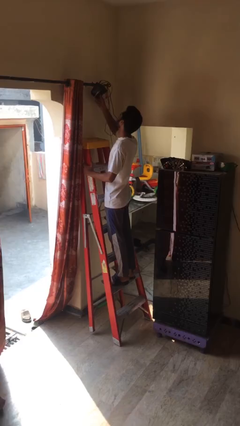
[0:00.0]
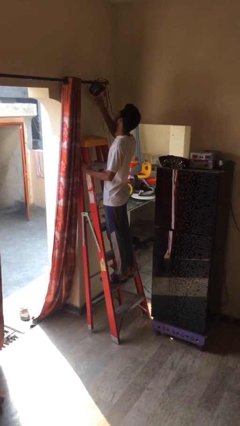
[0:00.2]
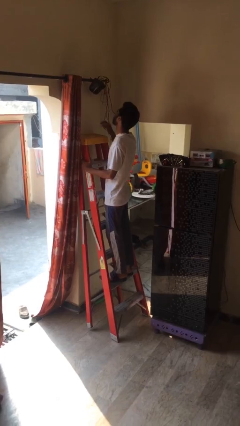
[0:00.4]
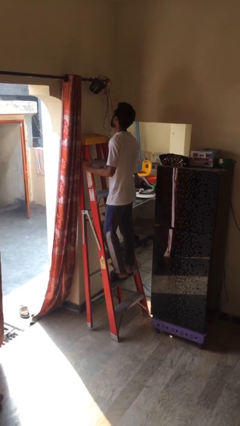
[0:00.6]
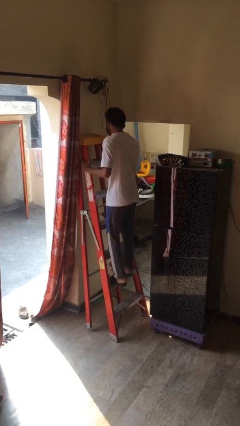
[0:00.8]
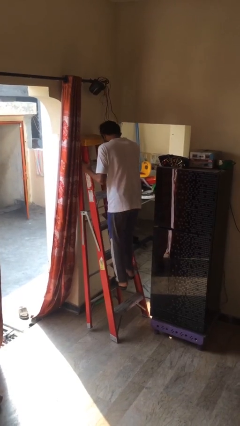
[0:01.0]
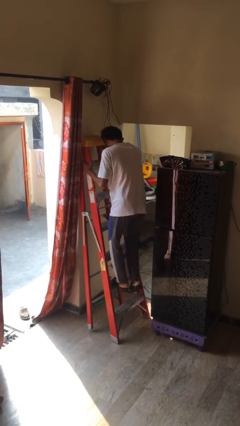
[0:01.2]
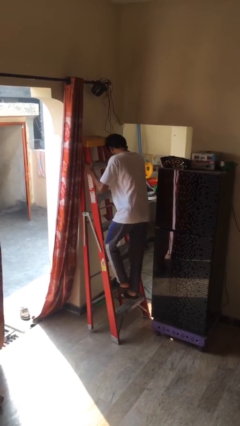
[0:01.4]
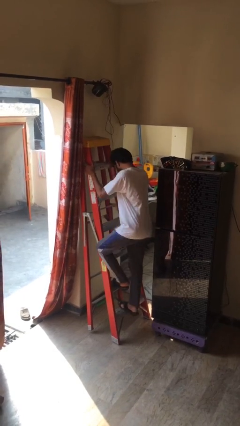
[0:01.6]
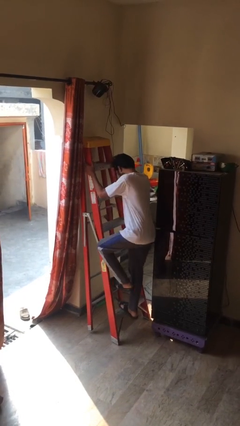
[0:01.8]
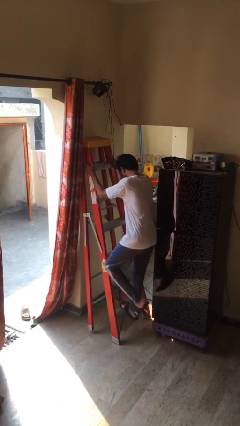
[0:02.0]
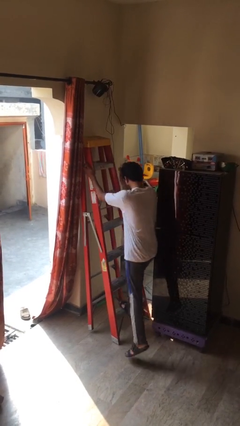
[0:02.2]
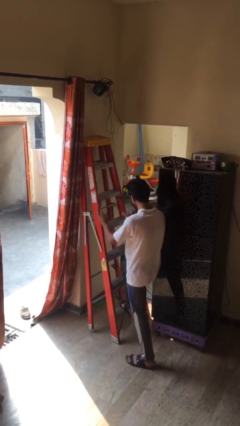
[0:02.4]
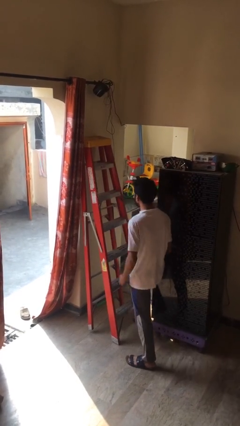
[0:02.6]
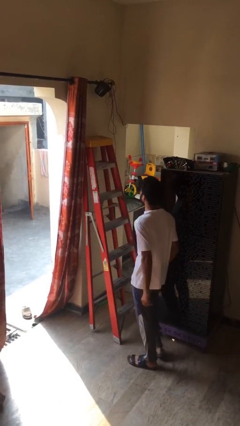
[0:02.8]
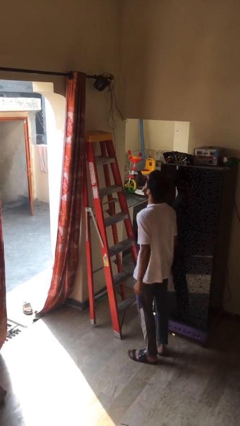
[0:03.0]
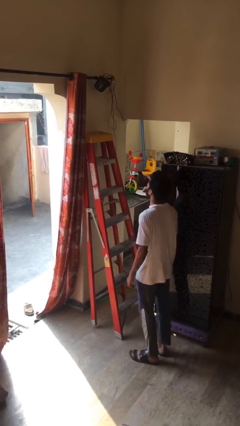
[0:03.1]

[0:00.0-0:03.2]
person climbs down ladder

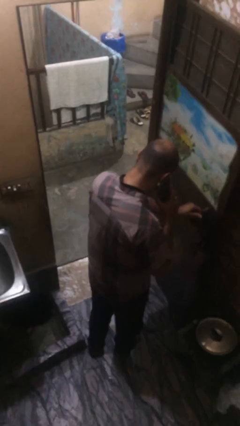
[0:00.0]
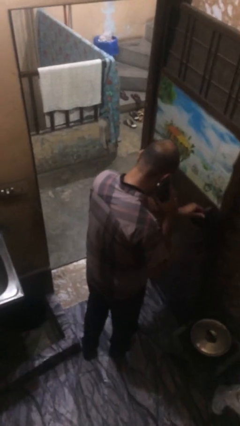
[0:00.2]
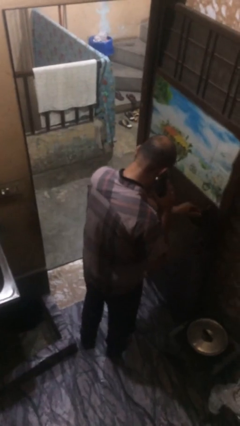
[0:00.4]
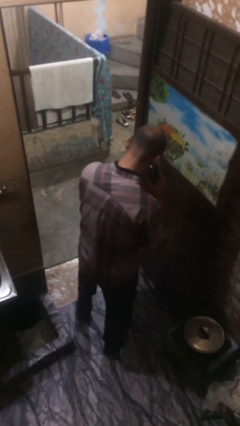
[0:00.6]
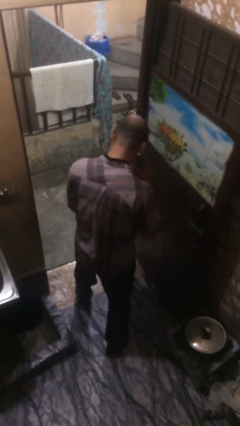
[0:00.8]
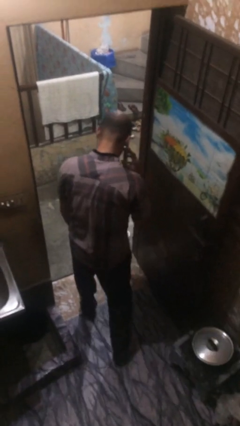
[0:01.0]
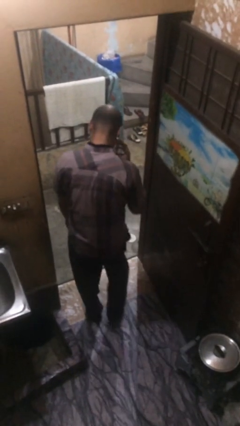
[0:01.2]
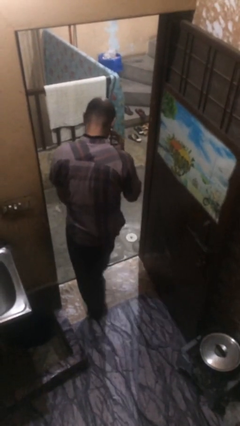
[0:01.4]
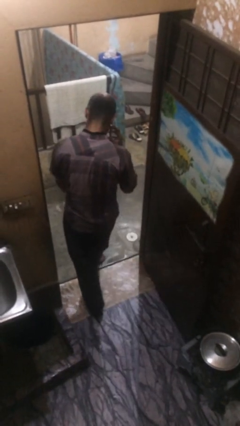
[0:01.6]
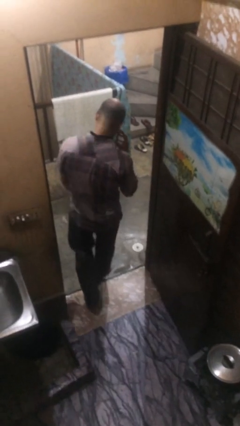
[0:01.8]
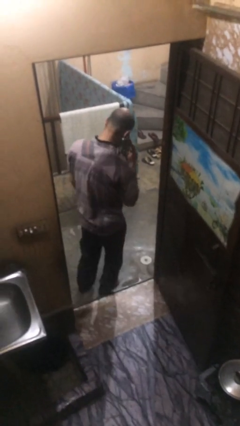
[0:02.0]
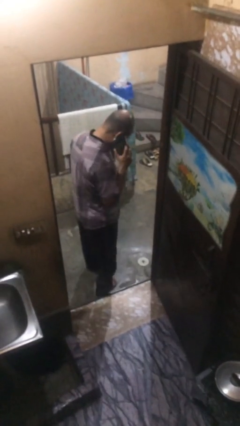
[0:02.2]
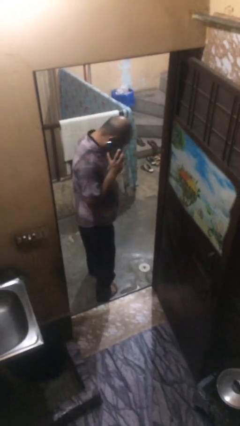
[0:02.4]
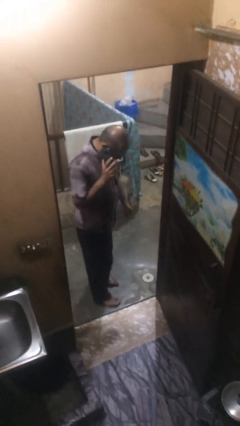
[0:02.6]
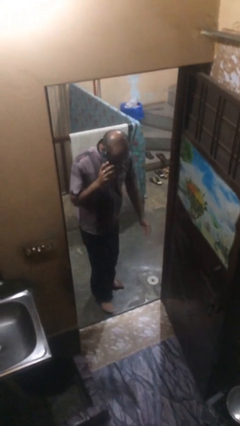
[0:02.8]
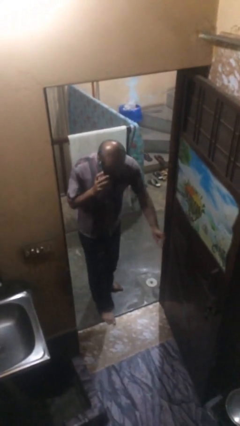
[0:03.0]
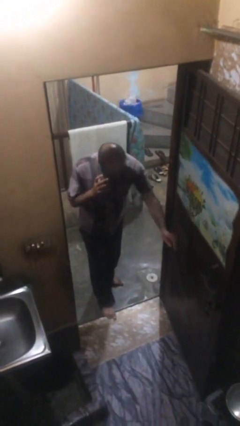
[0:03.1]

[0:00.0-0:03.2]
person exits scene through structure

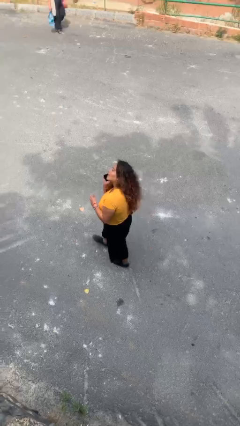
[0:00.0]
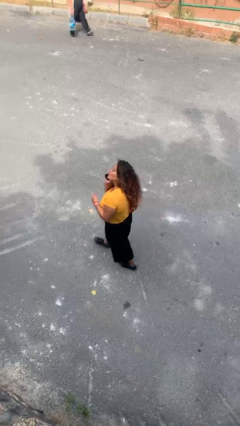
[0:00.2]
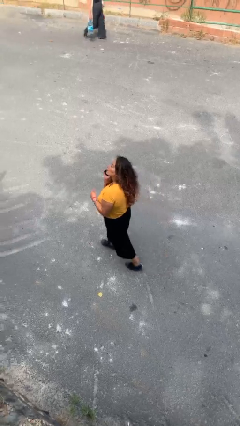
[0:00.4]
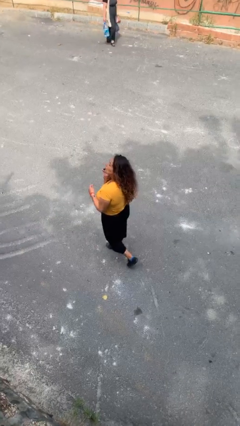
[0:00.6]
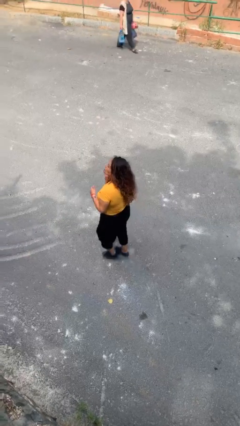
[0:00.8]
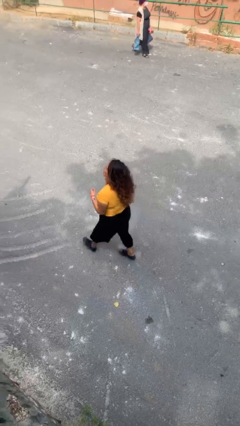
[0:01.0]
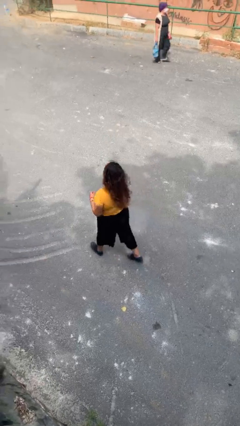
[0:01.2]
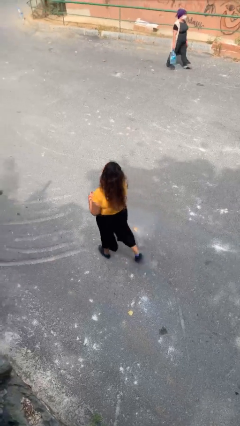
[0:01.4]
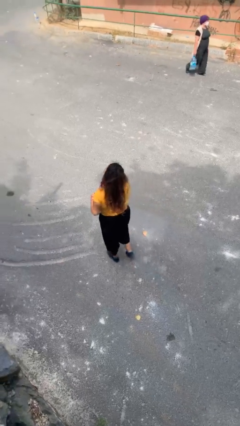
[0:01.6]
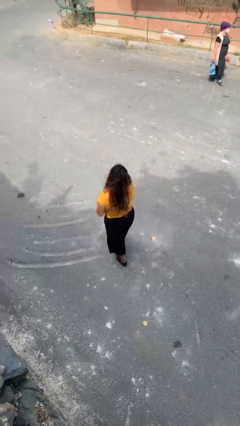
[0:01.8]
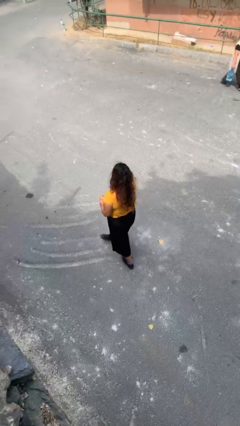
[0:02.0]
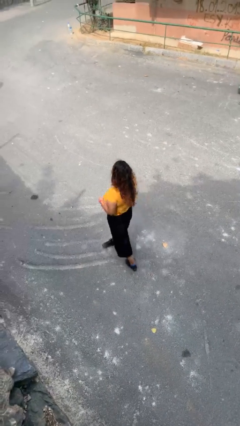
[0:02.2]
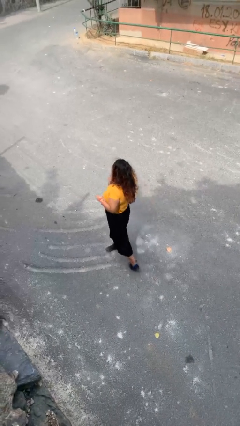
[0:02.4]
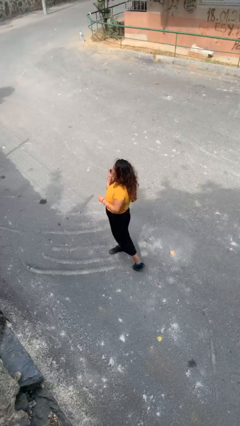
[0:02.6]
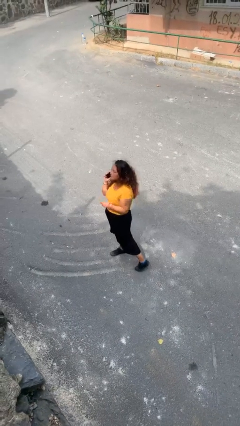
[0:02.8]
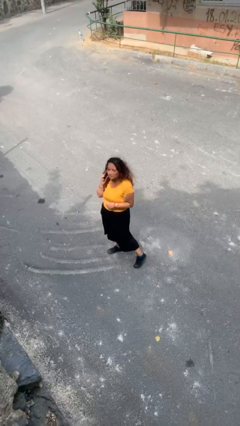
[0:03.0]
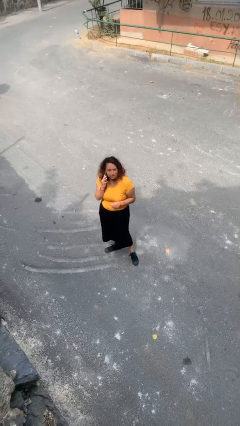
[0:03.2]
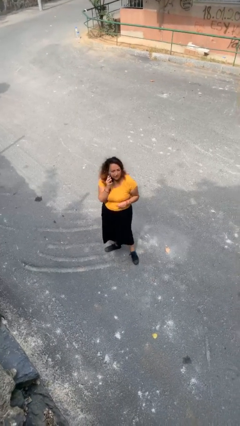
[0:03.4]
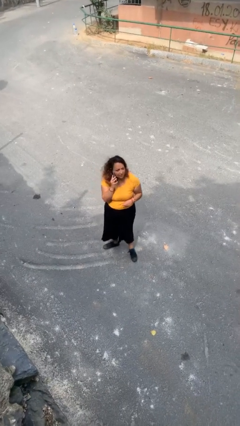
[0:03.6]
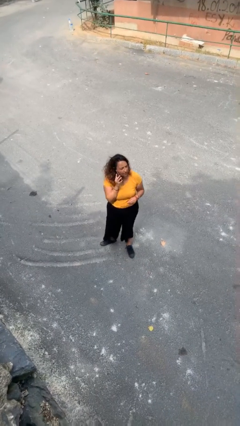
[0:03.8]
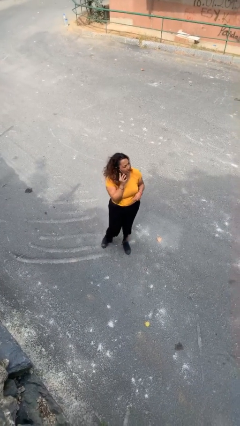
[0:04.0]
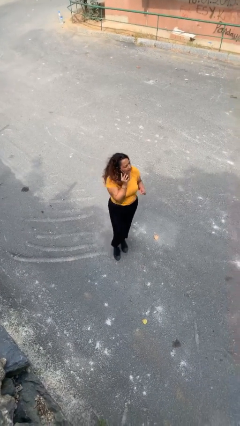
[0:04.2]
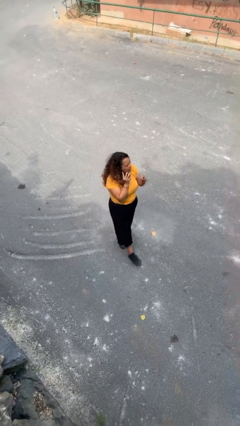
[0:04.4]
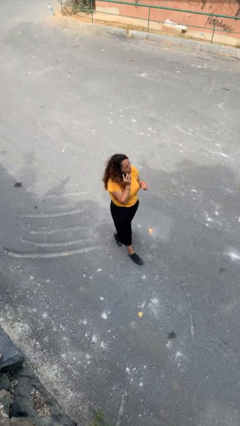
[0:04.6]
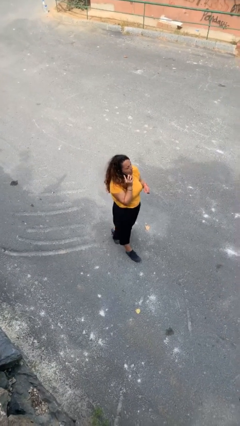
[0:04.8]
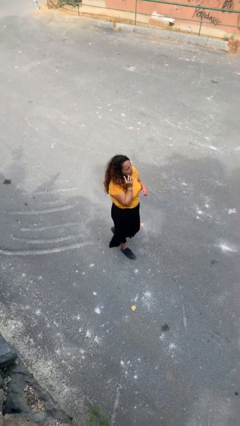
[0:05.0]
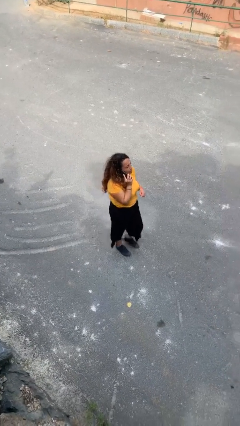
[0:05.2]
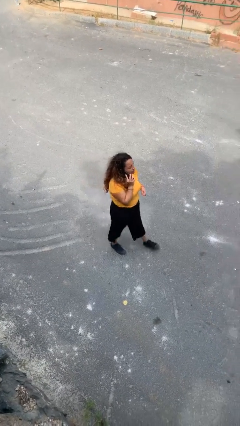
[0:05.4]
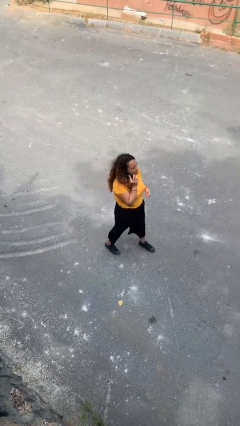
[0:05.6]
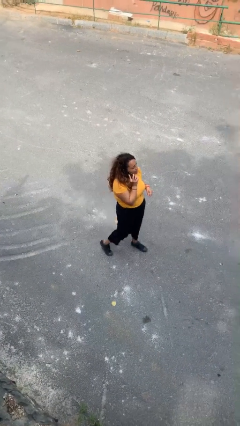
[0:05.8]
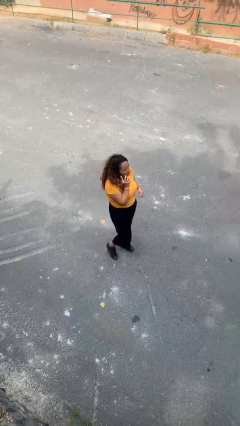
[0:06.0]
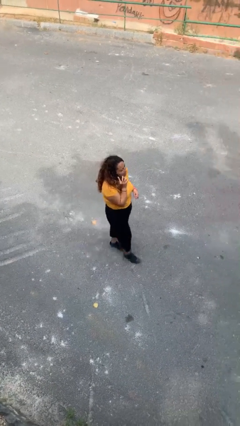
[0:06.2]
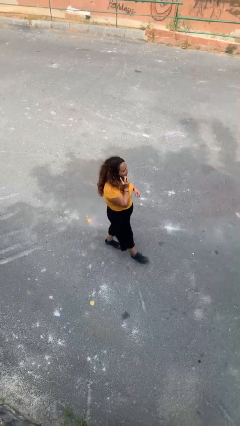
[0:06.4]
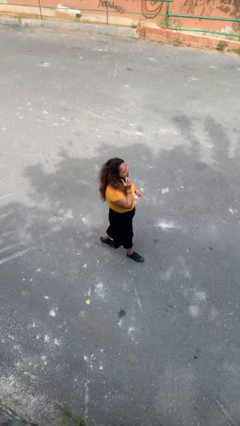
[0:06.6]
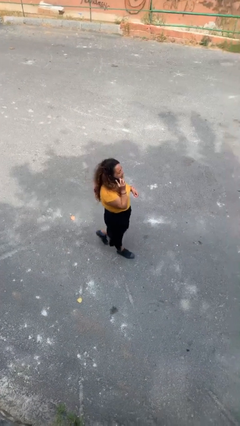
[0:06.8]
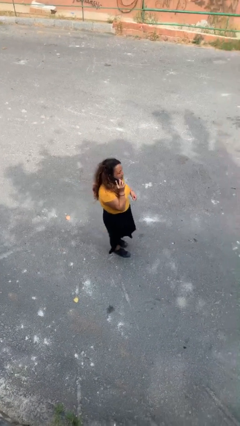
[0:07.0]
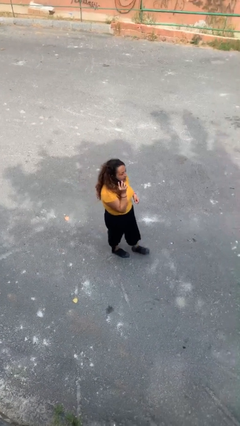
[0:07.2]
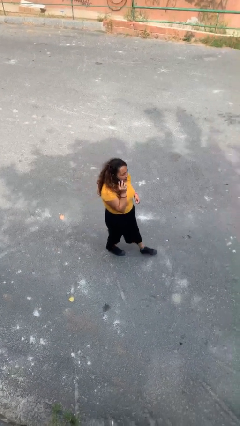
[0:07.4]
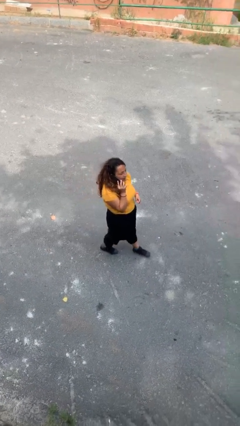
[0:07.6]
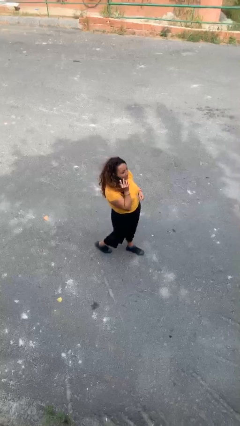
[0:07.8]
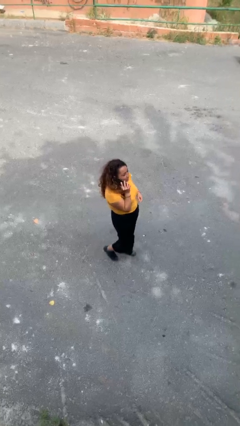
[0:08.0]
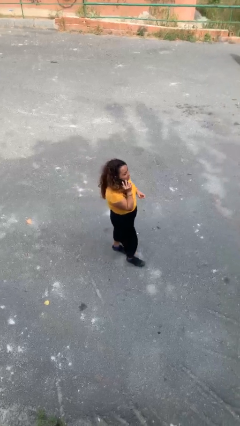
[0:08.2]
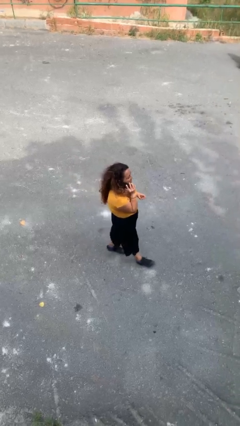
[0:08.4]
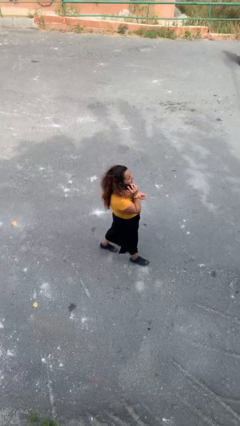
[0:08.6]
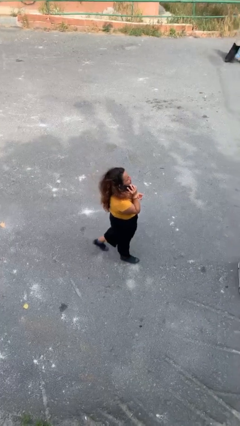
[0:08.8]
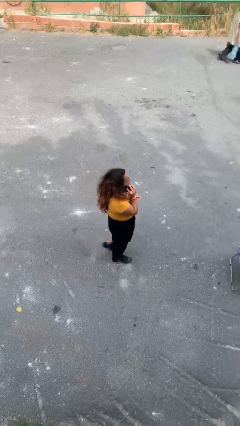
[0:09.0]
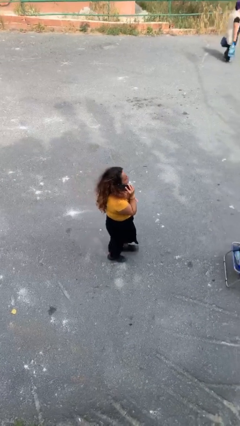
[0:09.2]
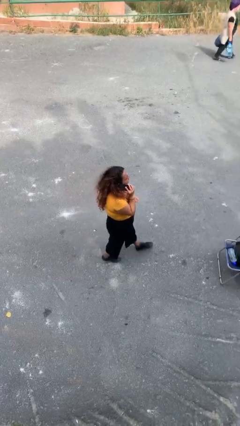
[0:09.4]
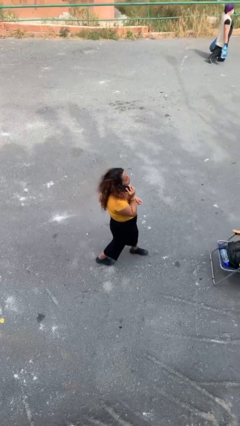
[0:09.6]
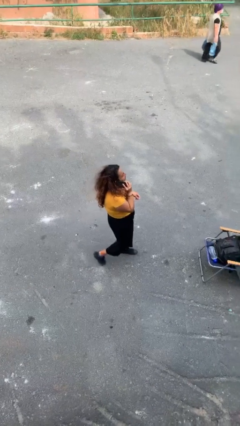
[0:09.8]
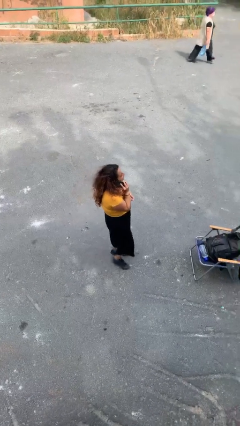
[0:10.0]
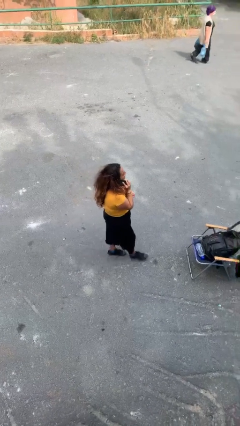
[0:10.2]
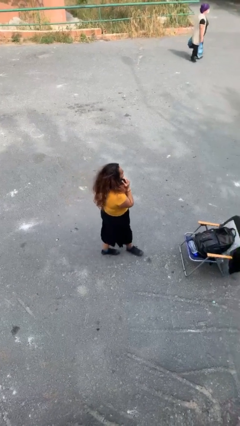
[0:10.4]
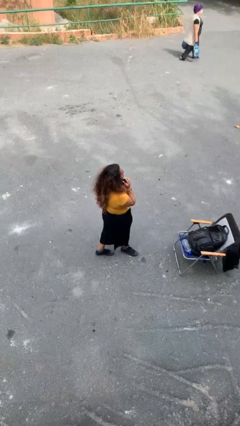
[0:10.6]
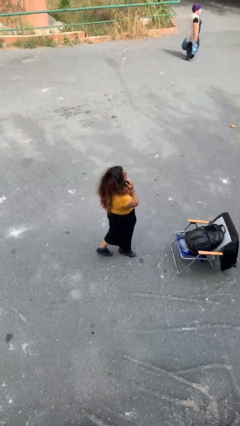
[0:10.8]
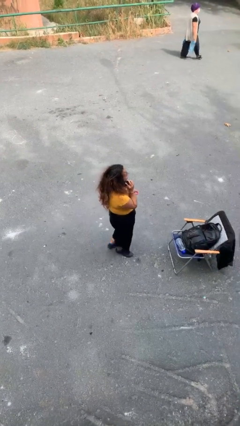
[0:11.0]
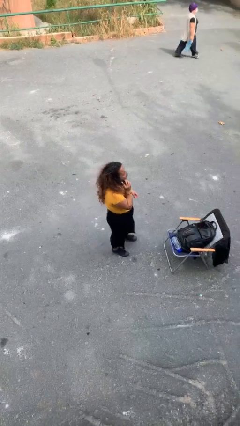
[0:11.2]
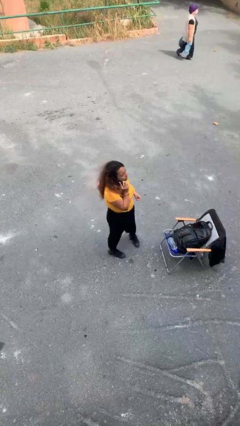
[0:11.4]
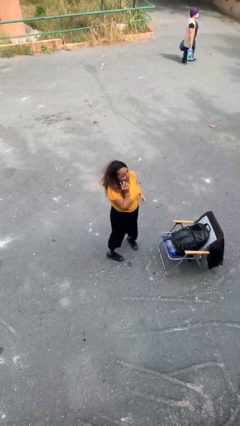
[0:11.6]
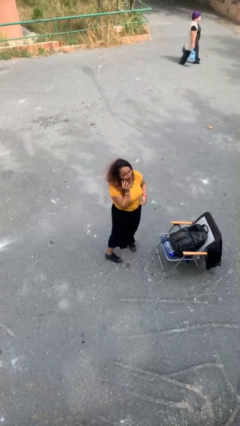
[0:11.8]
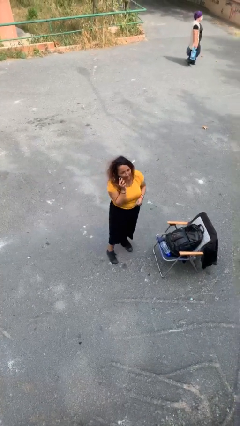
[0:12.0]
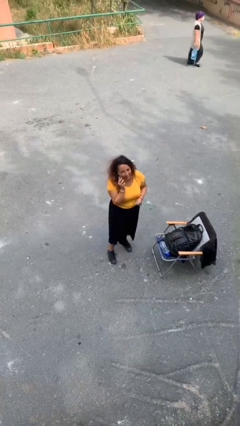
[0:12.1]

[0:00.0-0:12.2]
person talks on phone
